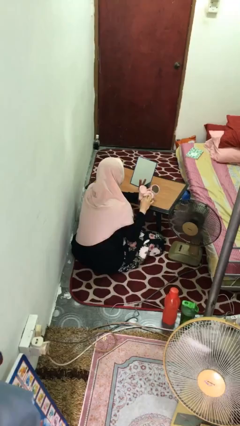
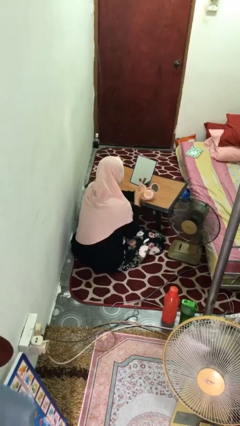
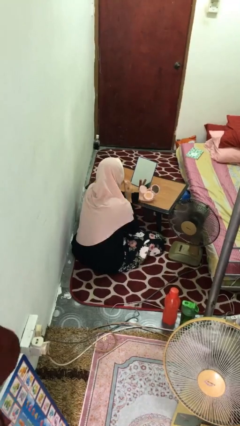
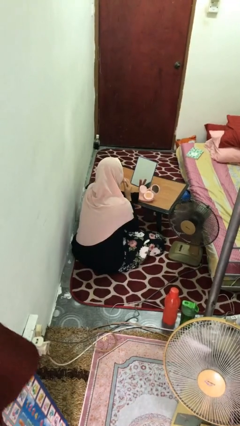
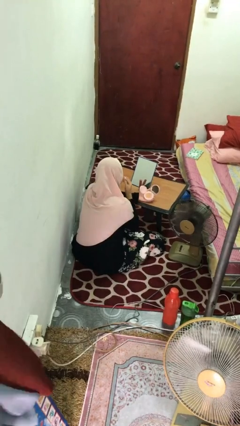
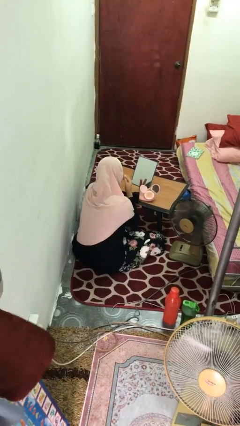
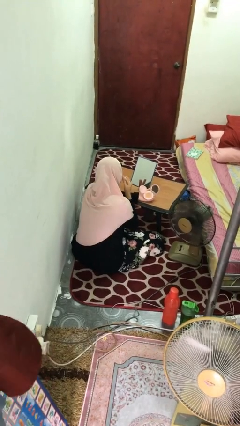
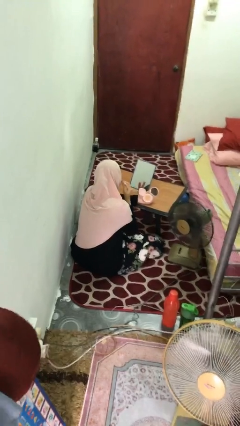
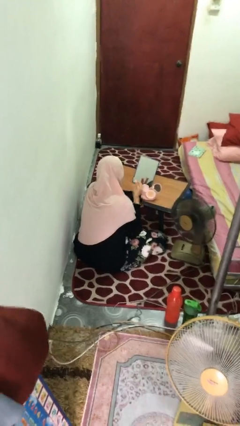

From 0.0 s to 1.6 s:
person applies foundation makeup

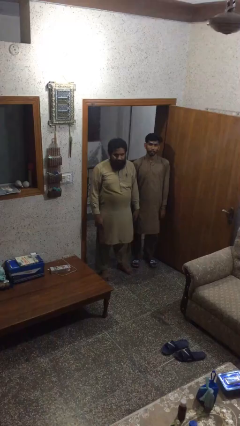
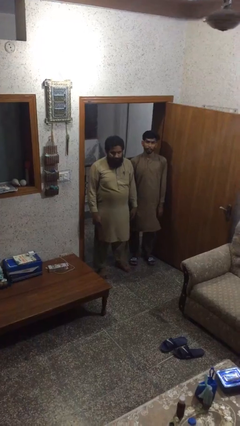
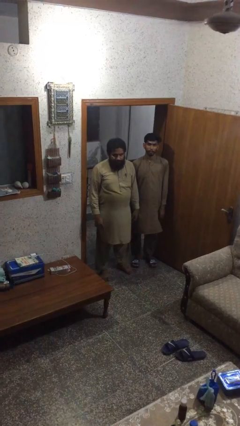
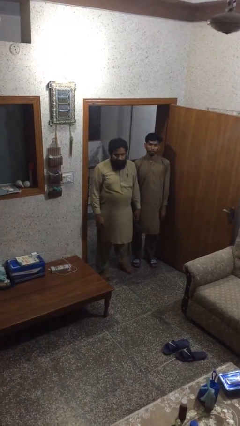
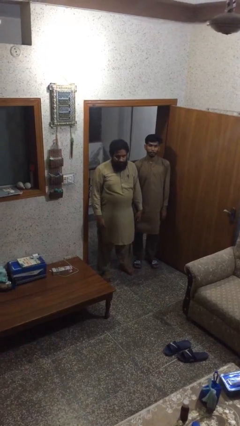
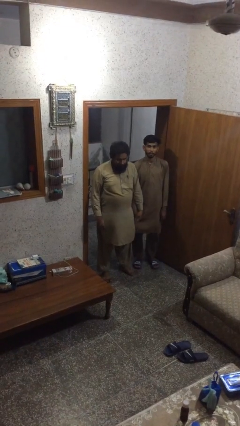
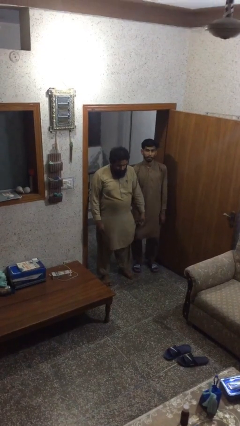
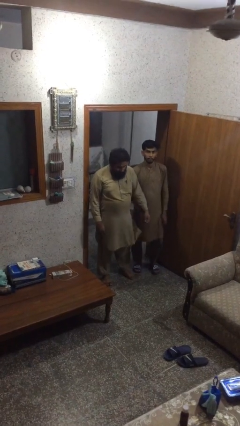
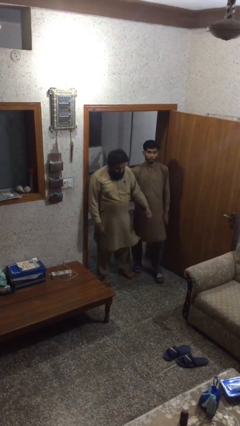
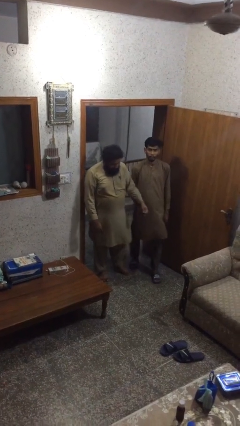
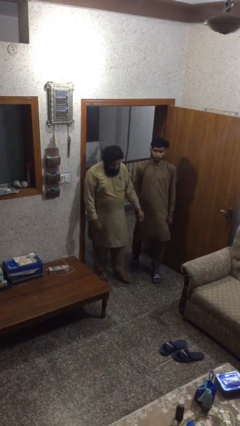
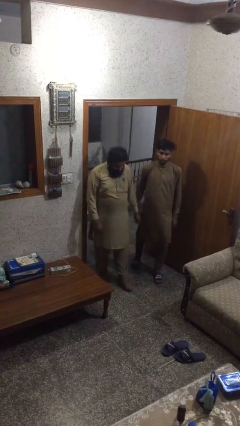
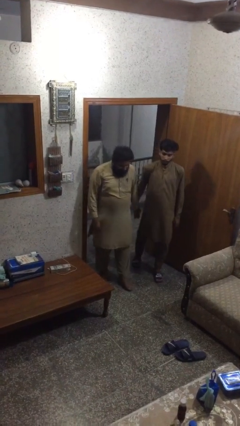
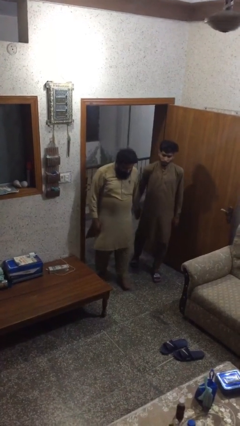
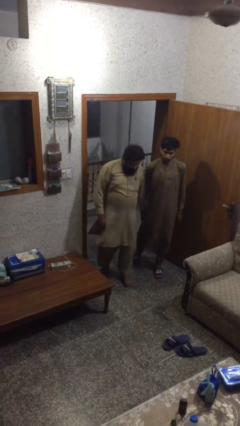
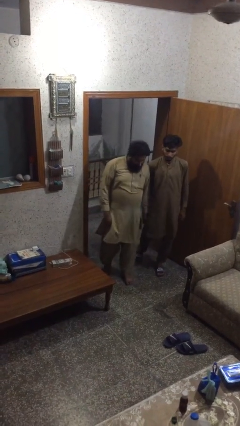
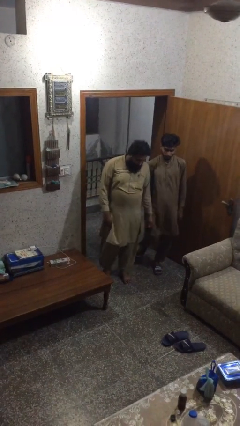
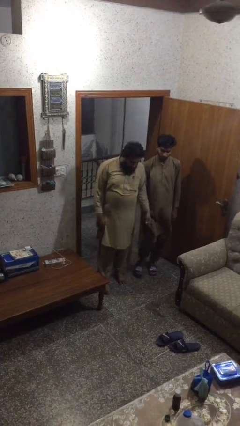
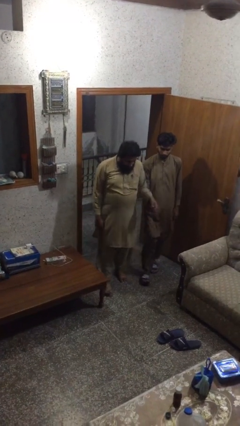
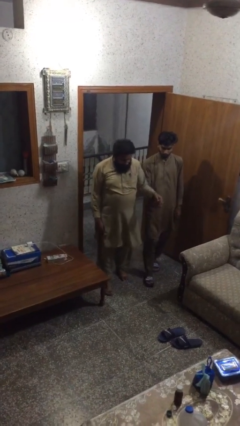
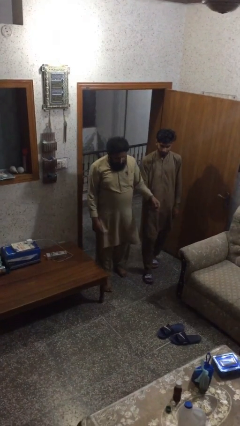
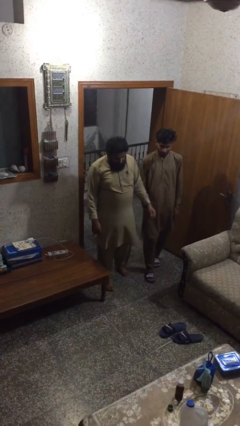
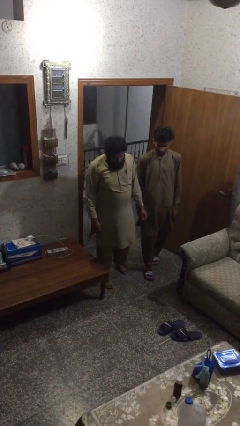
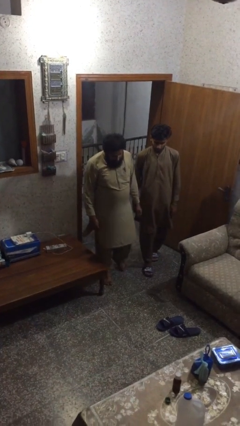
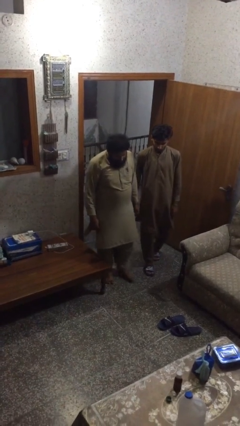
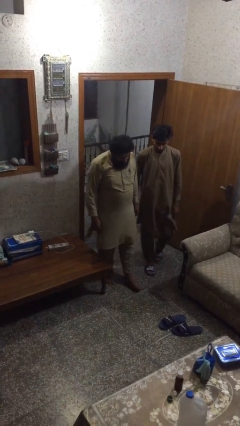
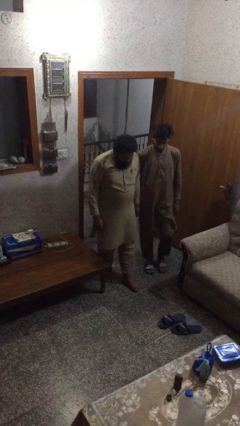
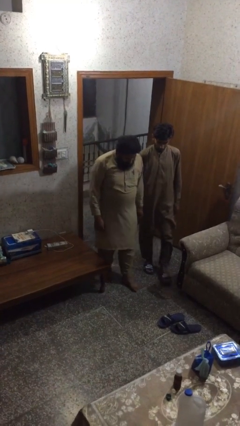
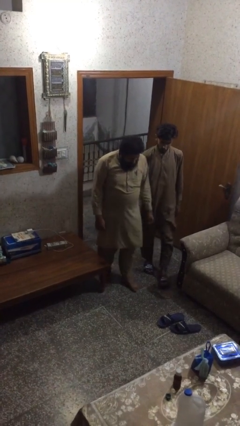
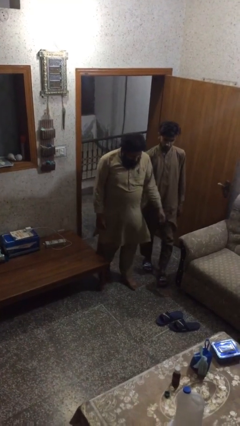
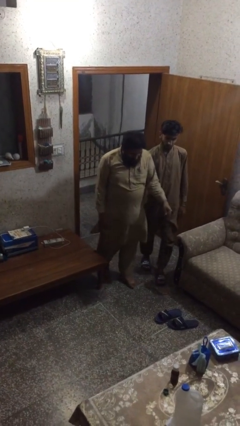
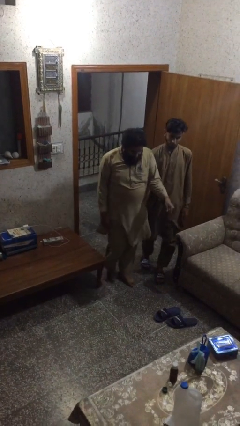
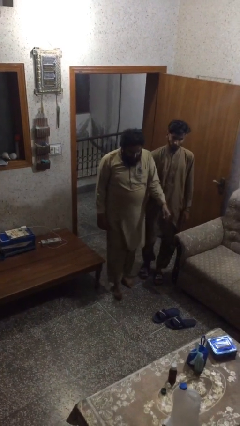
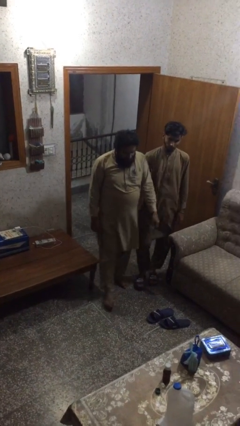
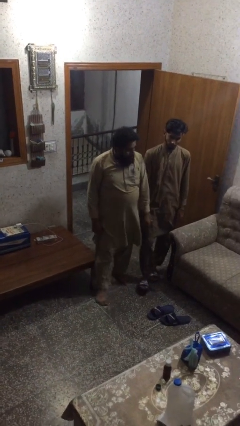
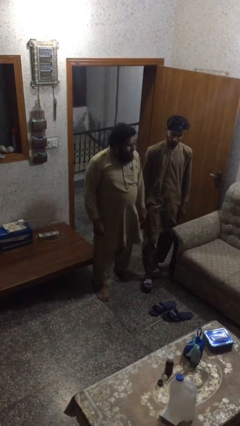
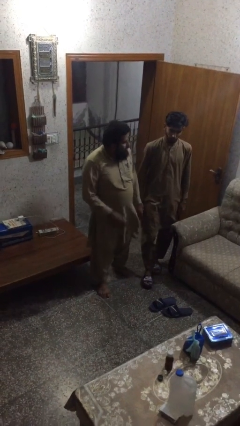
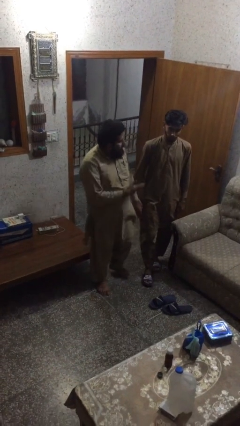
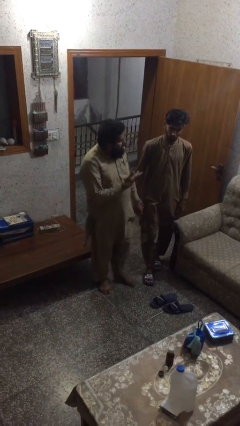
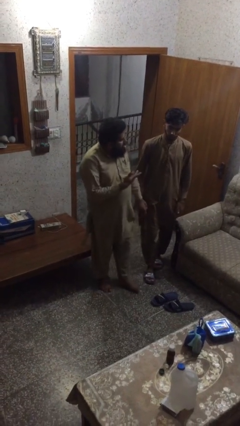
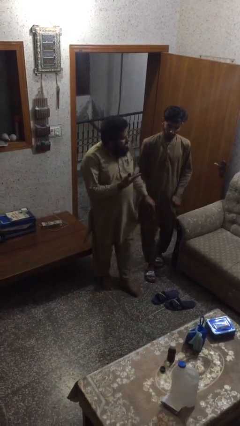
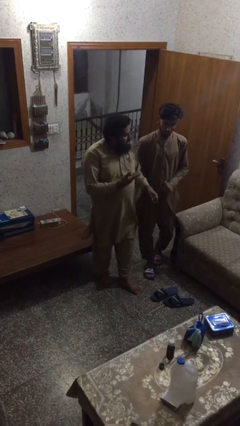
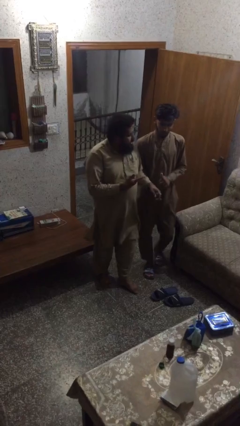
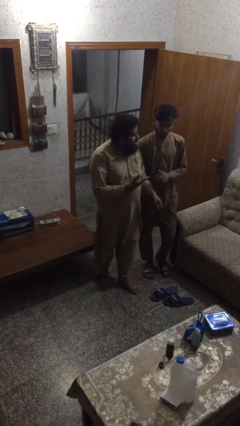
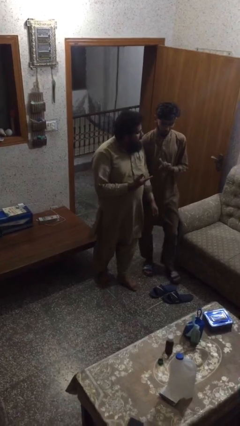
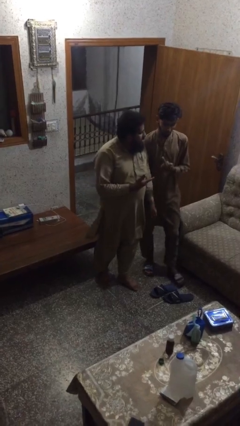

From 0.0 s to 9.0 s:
person holds hand

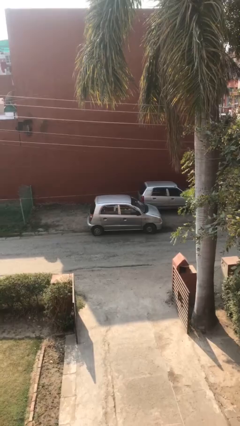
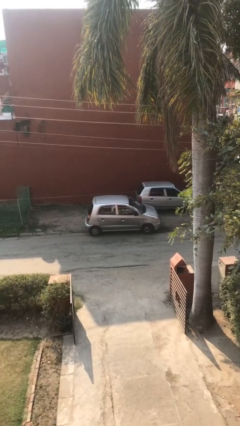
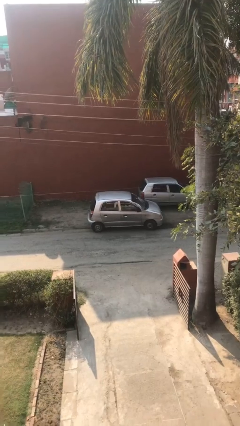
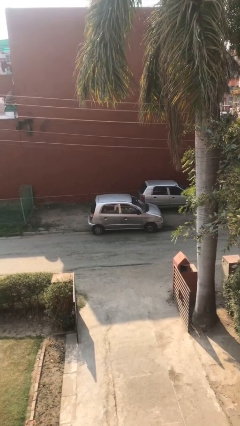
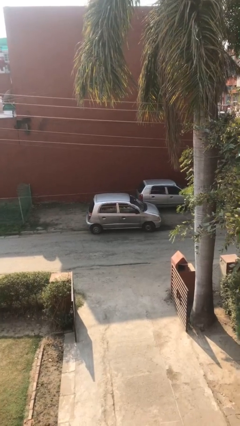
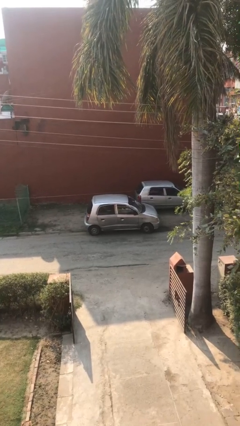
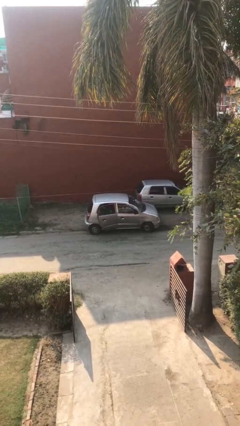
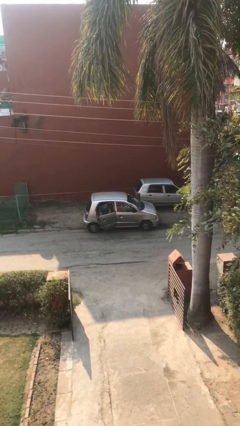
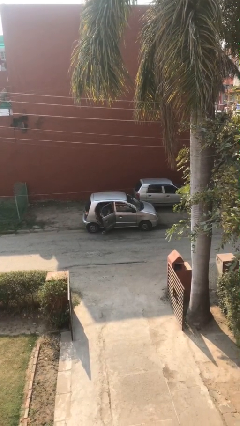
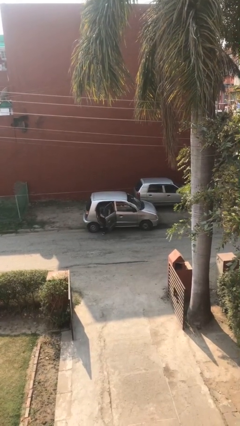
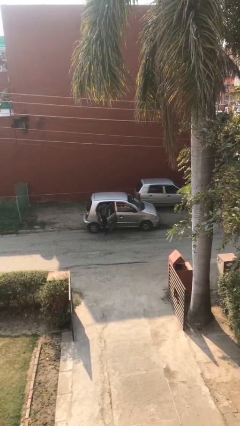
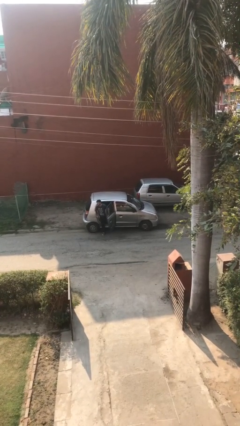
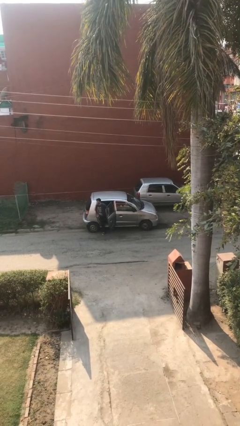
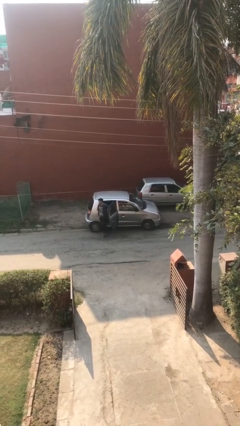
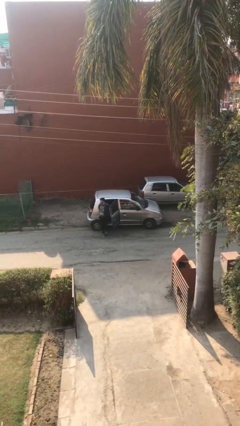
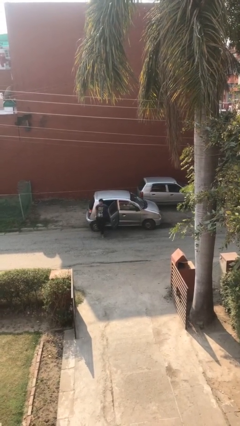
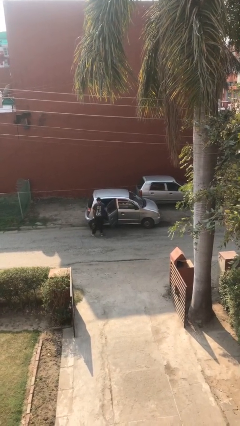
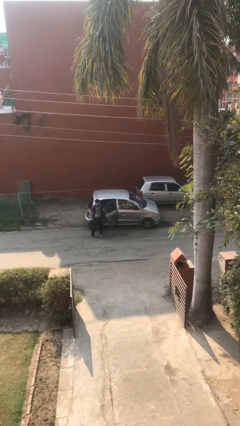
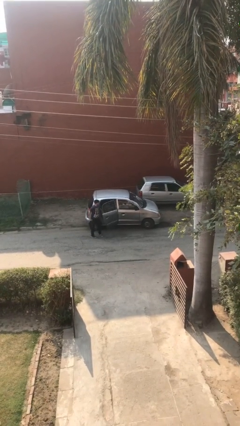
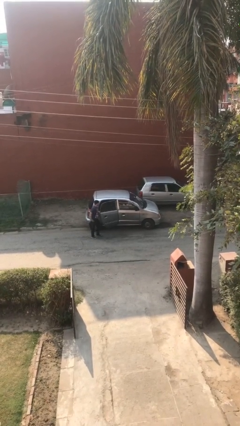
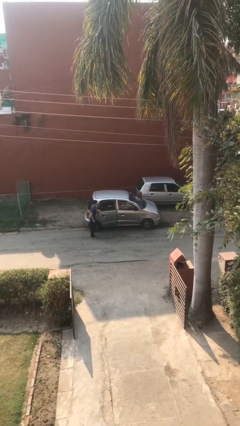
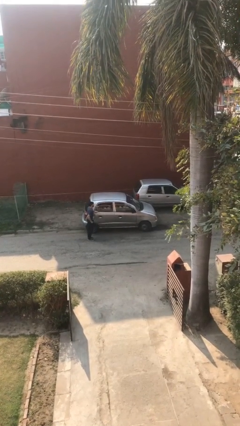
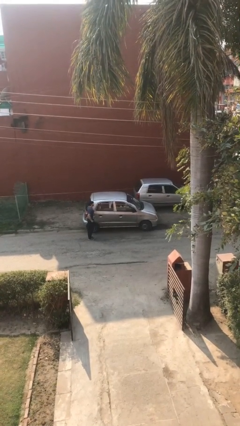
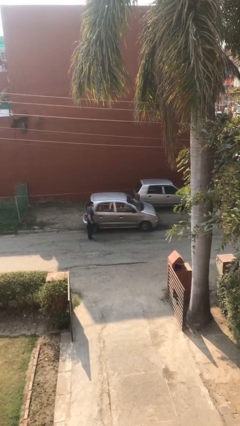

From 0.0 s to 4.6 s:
car drops off person

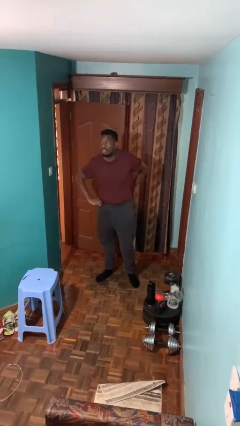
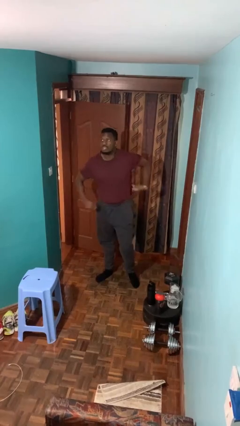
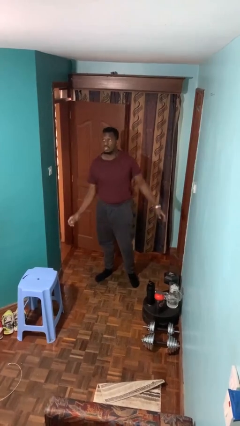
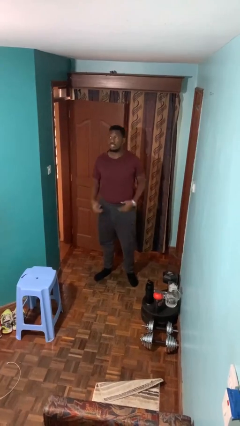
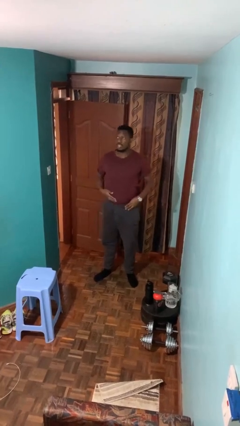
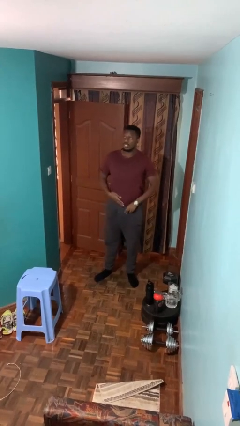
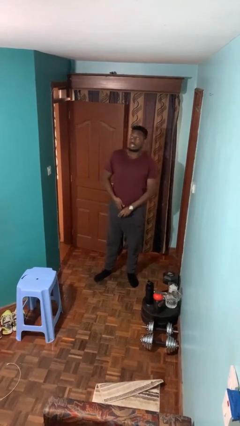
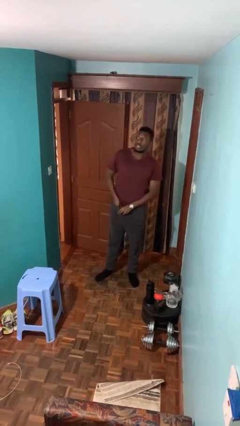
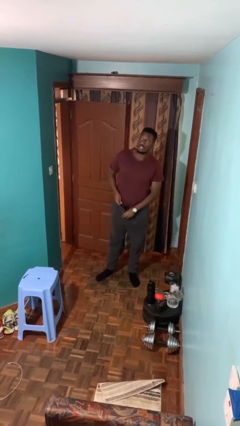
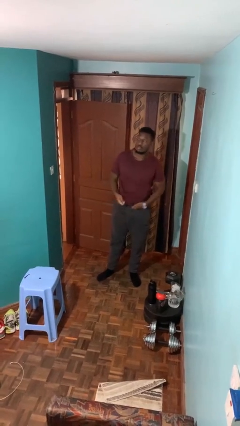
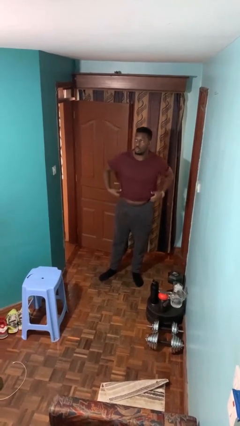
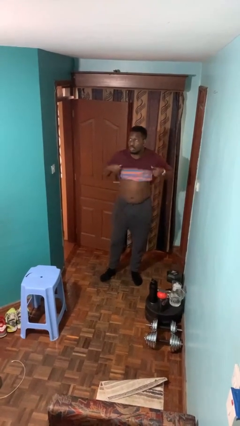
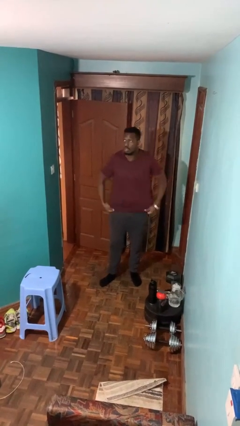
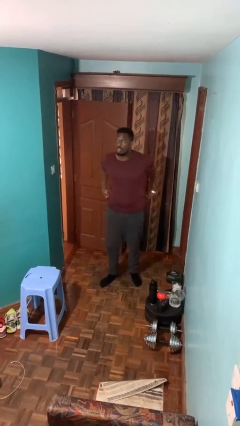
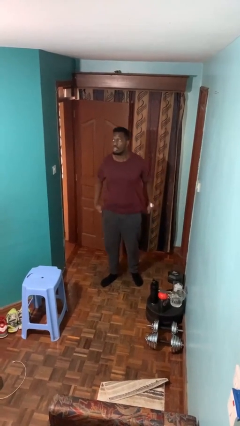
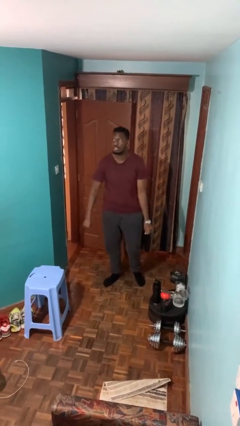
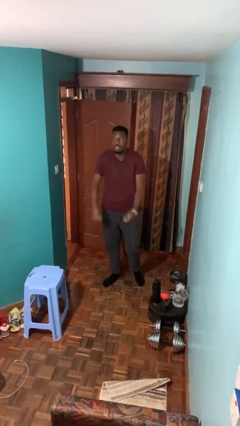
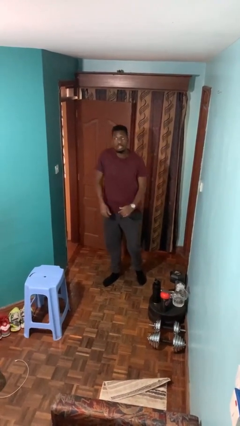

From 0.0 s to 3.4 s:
person untucks shirt
